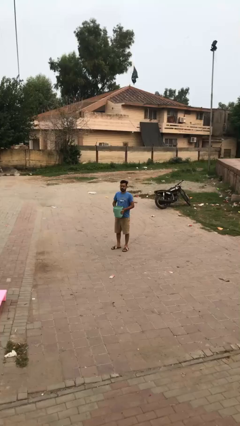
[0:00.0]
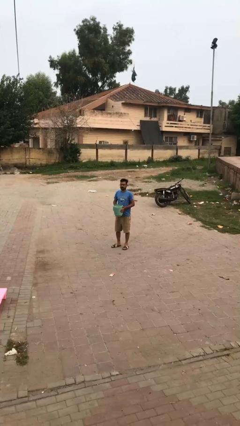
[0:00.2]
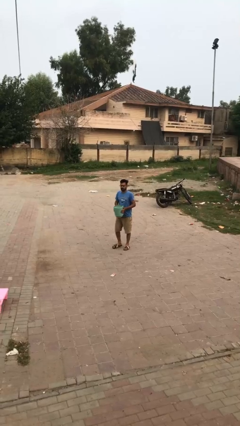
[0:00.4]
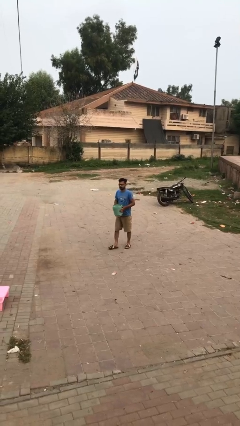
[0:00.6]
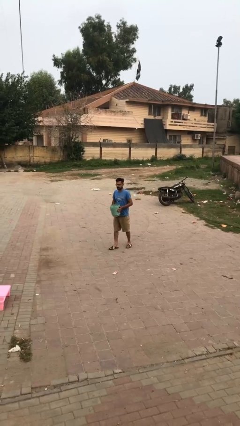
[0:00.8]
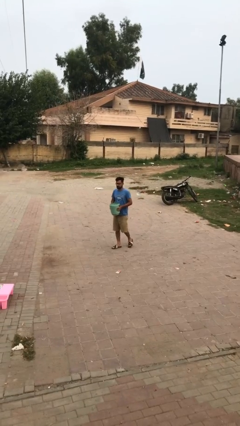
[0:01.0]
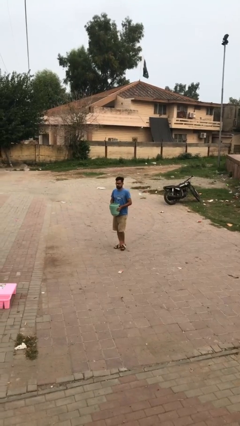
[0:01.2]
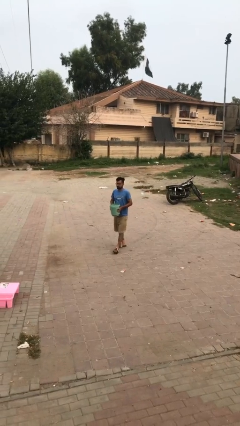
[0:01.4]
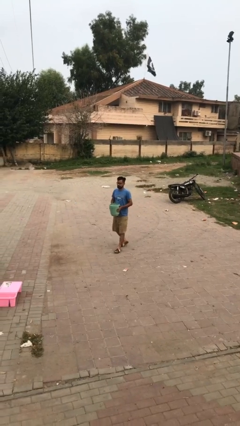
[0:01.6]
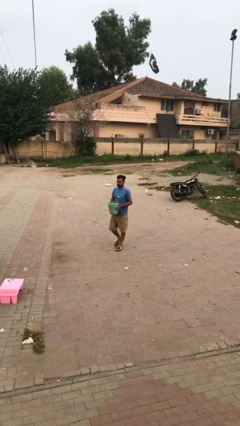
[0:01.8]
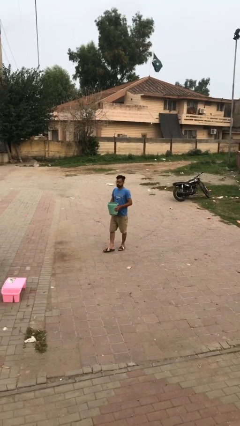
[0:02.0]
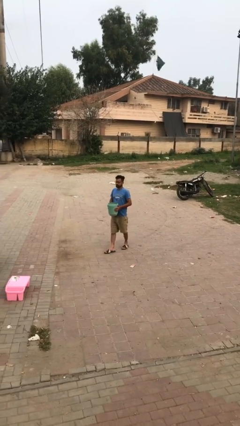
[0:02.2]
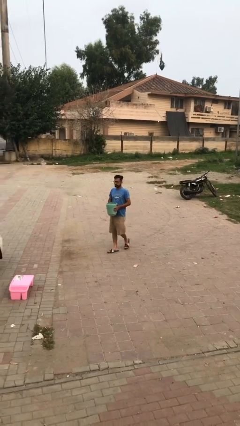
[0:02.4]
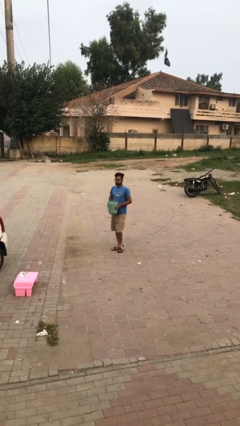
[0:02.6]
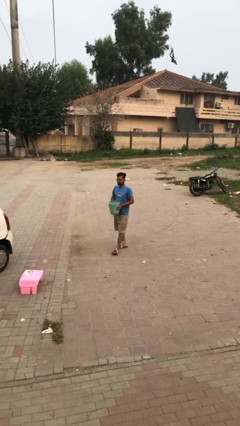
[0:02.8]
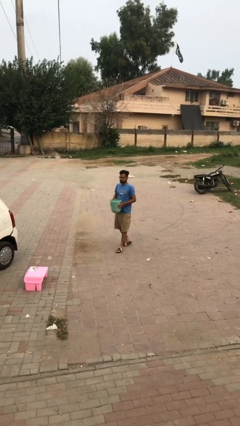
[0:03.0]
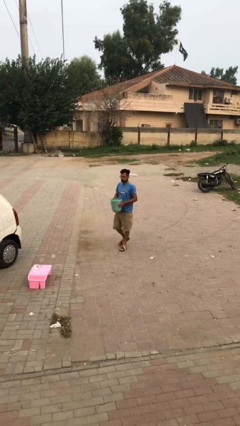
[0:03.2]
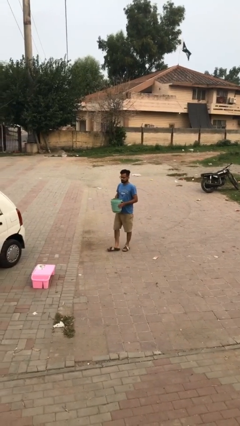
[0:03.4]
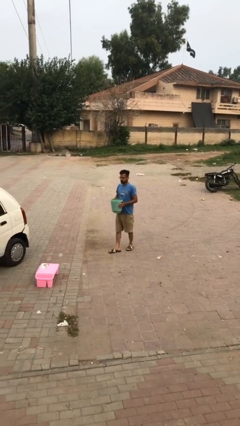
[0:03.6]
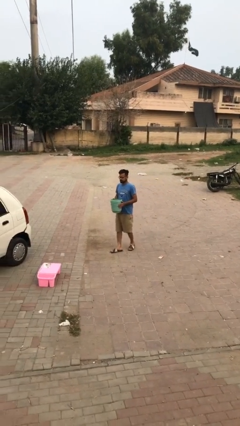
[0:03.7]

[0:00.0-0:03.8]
person carries heavy object

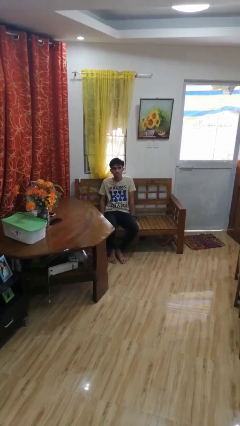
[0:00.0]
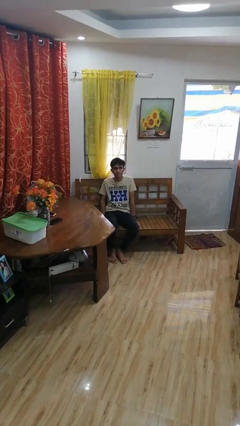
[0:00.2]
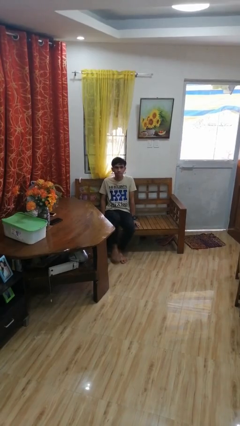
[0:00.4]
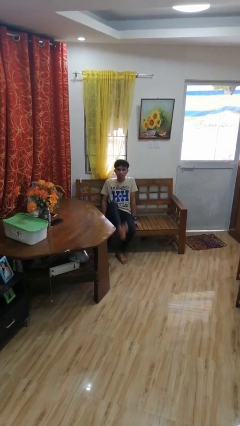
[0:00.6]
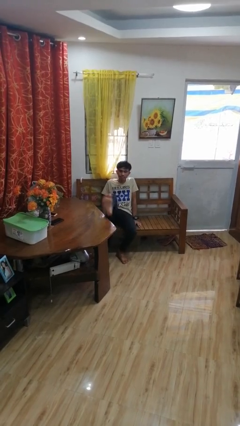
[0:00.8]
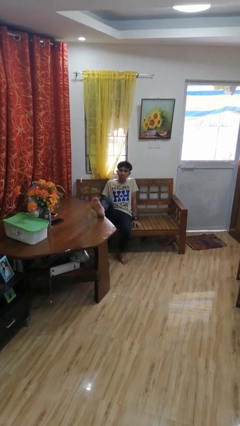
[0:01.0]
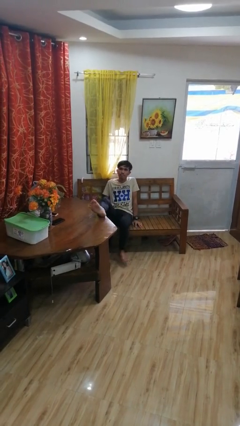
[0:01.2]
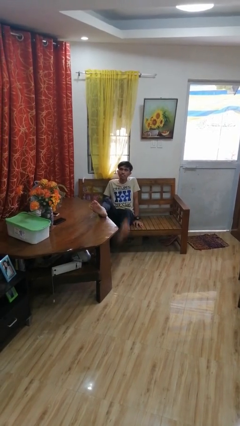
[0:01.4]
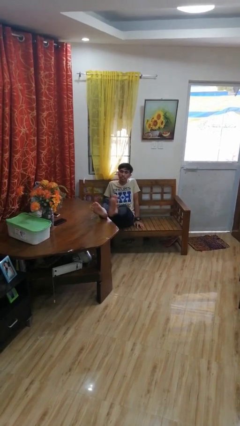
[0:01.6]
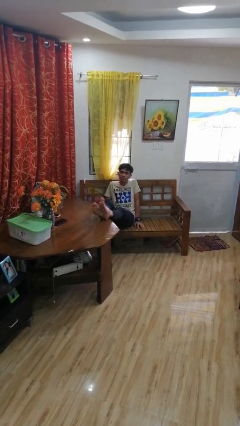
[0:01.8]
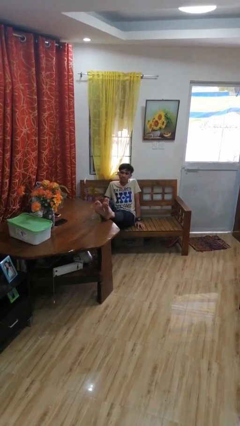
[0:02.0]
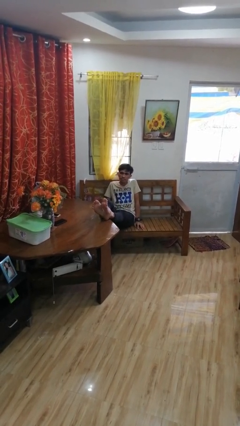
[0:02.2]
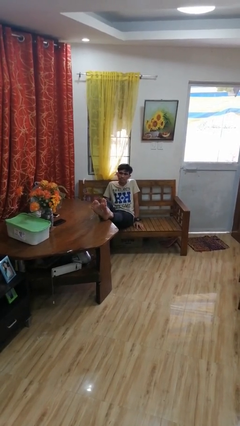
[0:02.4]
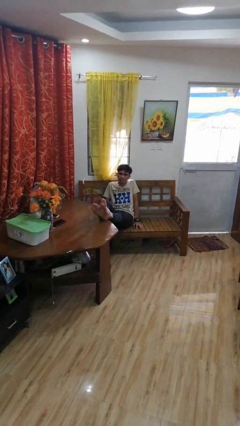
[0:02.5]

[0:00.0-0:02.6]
person puts feet up

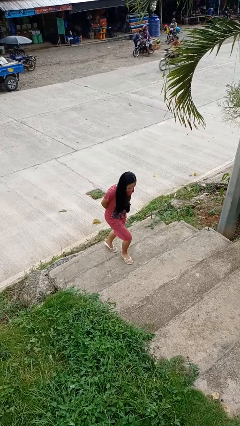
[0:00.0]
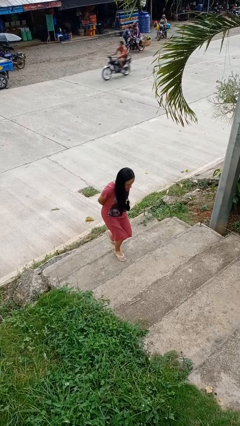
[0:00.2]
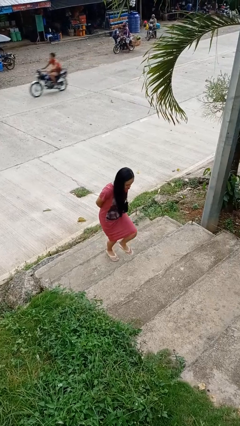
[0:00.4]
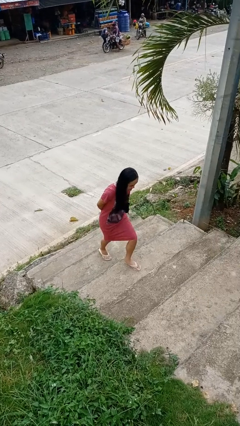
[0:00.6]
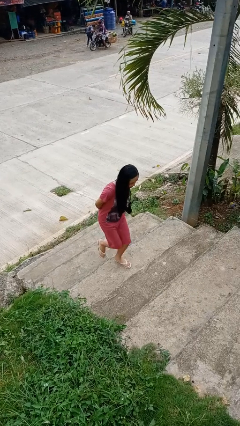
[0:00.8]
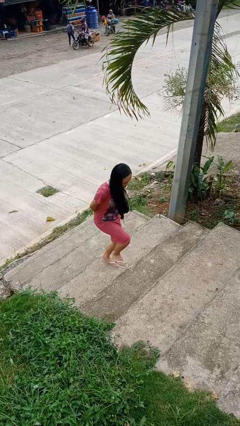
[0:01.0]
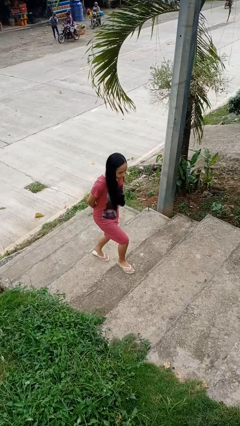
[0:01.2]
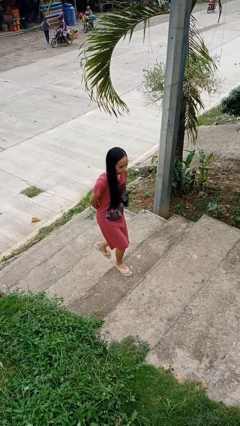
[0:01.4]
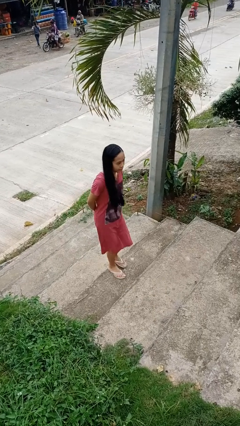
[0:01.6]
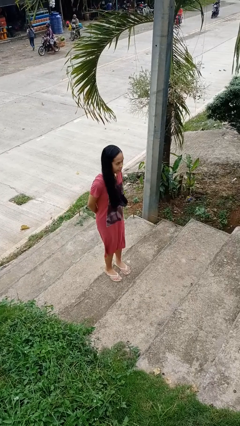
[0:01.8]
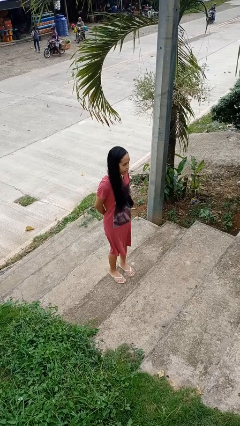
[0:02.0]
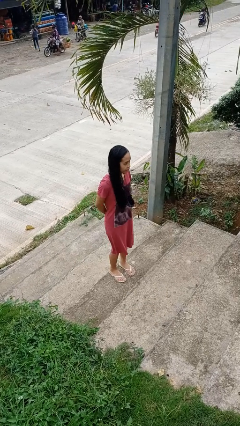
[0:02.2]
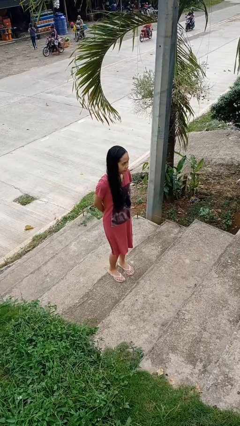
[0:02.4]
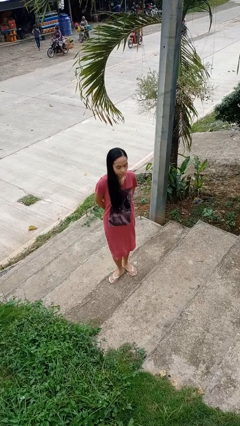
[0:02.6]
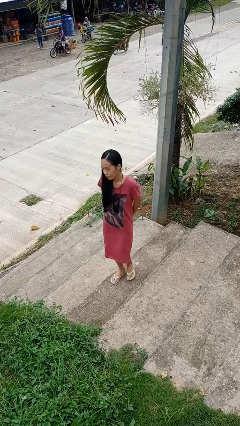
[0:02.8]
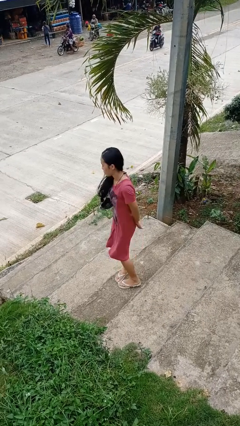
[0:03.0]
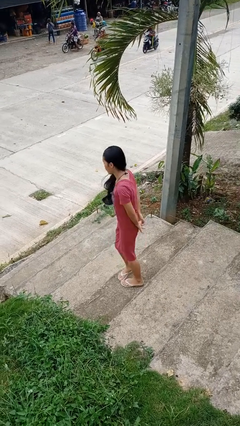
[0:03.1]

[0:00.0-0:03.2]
person climbs up stairs

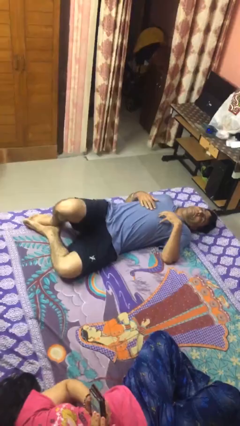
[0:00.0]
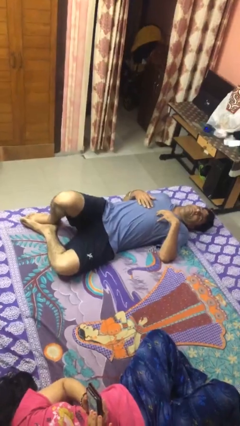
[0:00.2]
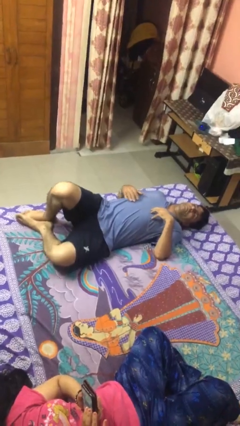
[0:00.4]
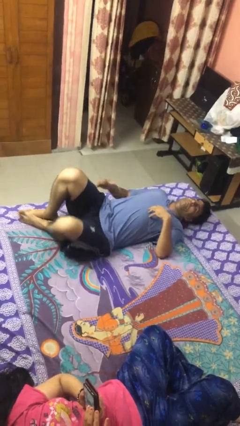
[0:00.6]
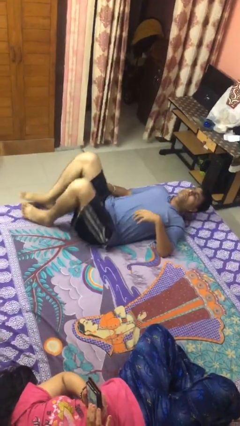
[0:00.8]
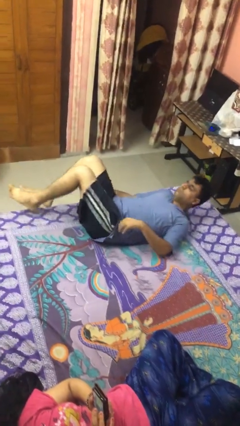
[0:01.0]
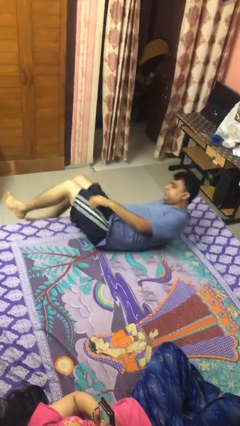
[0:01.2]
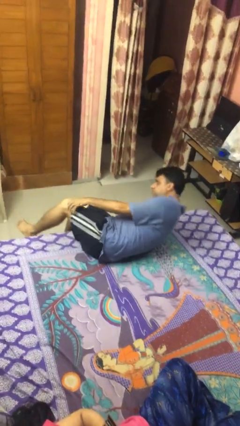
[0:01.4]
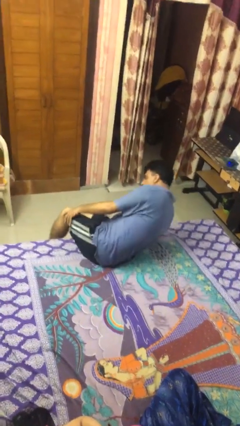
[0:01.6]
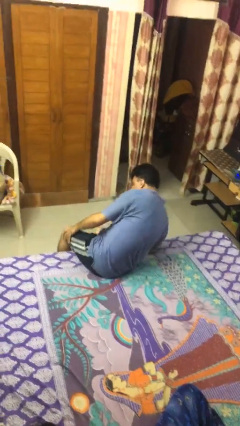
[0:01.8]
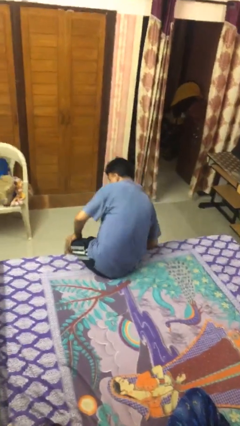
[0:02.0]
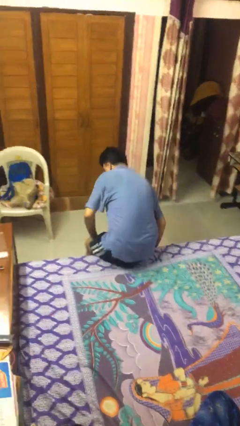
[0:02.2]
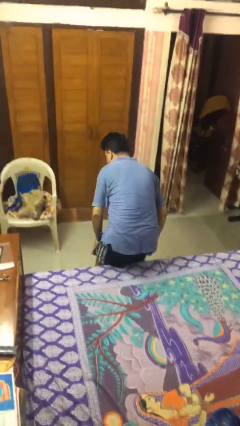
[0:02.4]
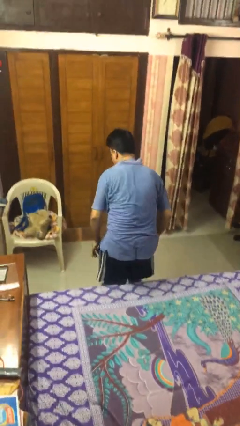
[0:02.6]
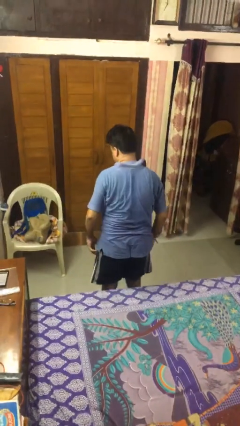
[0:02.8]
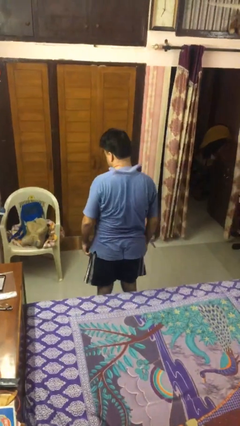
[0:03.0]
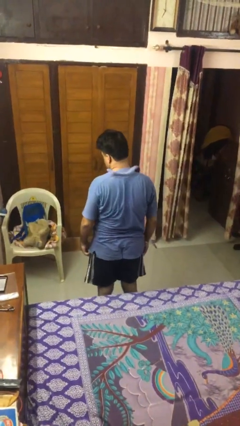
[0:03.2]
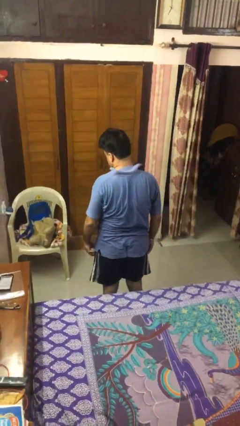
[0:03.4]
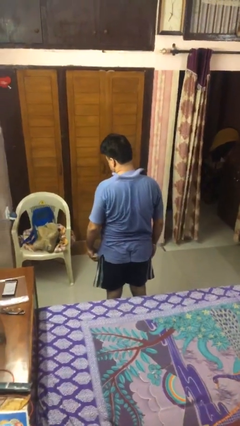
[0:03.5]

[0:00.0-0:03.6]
person stands up

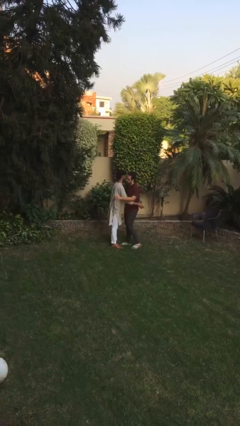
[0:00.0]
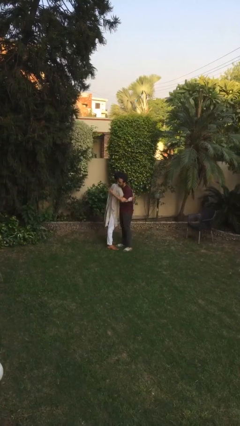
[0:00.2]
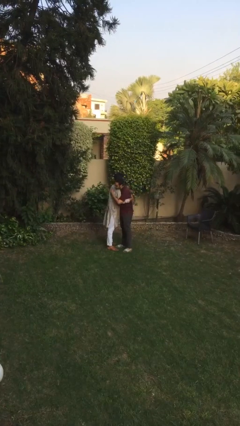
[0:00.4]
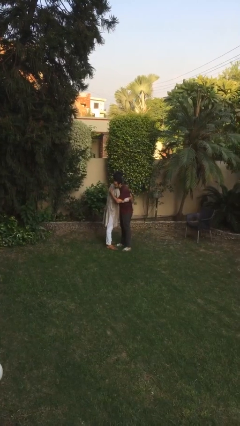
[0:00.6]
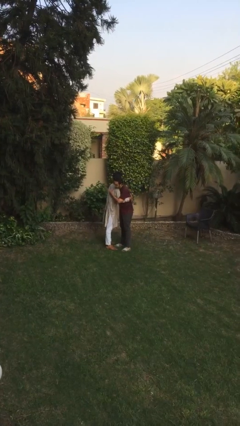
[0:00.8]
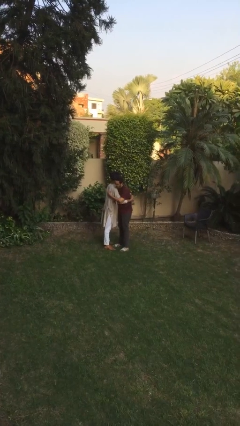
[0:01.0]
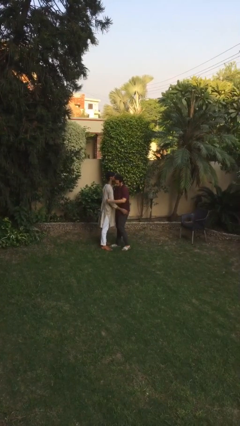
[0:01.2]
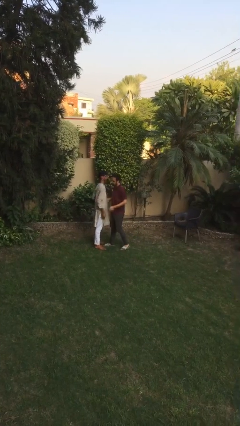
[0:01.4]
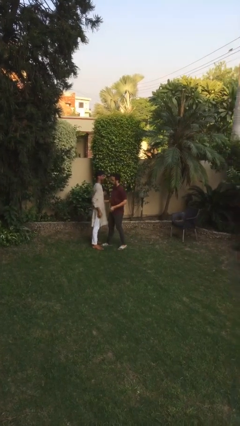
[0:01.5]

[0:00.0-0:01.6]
person embraces person

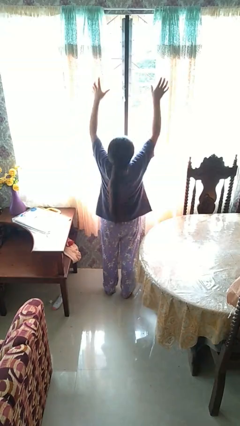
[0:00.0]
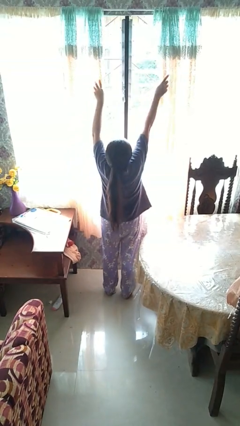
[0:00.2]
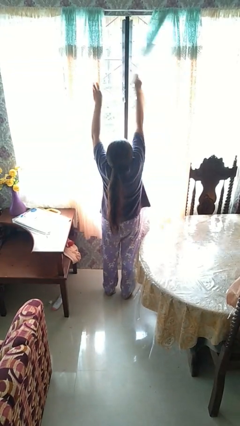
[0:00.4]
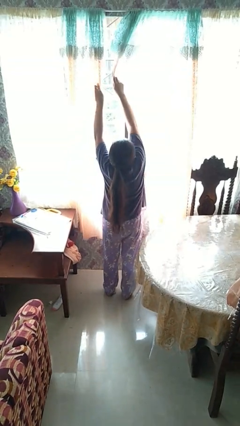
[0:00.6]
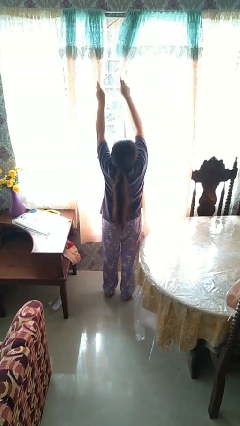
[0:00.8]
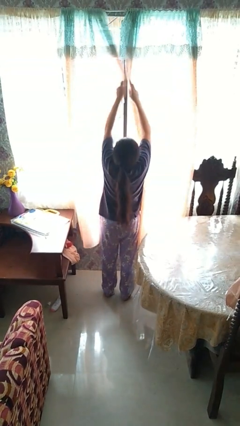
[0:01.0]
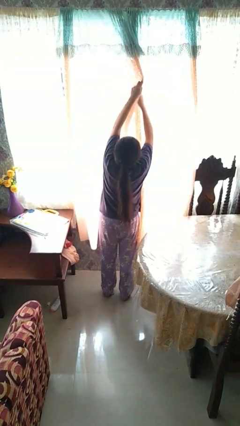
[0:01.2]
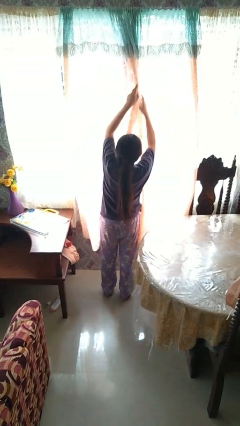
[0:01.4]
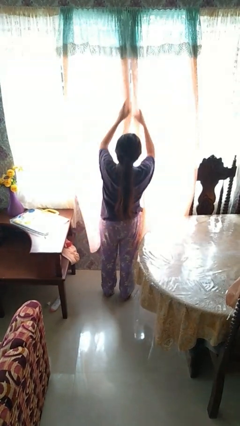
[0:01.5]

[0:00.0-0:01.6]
person closes curtains

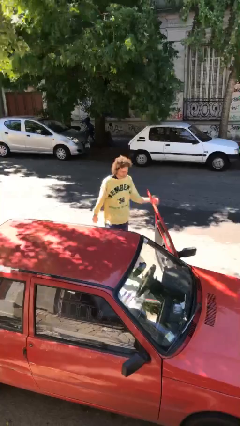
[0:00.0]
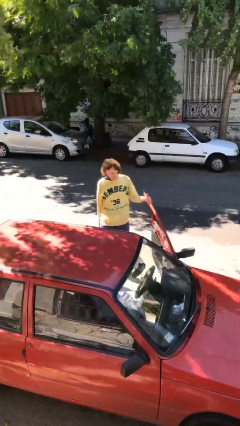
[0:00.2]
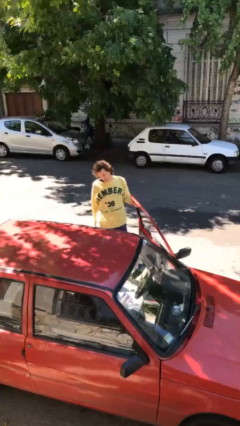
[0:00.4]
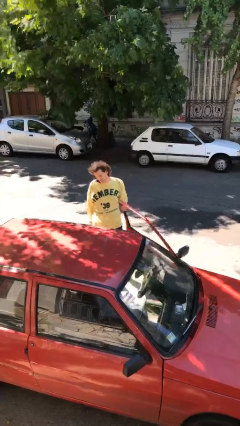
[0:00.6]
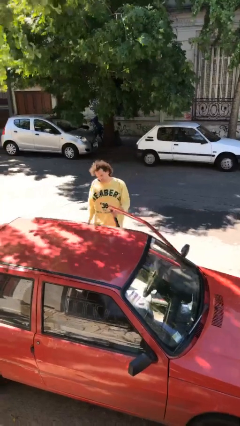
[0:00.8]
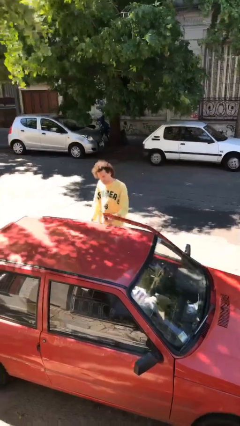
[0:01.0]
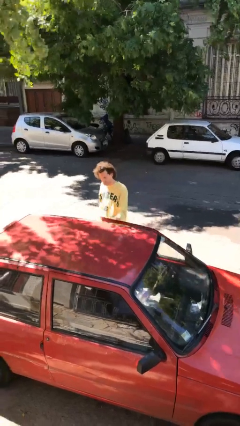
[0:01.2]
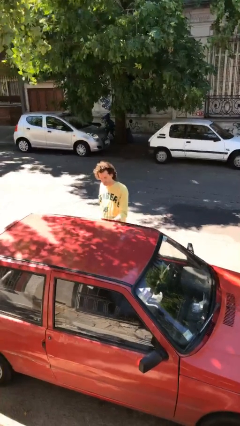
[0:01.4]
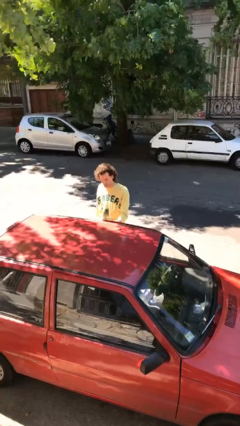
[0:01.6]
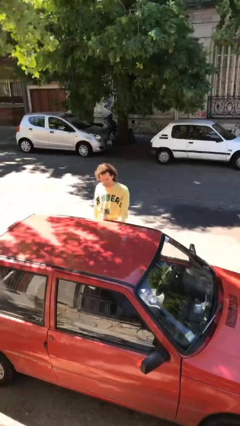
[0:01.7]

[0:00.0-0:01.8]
person closes car door
